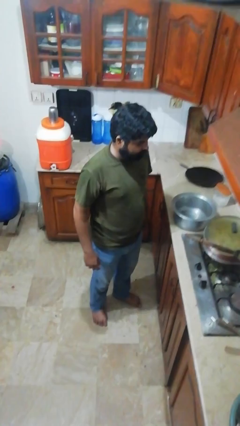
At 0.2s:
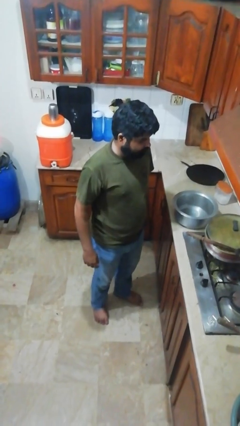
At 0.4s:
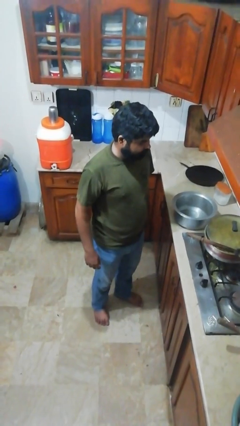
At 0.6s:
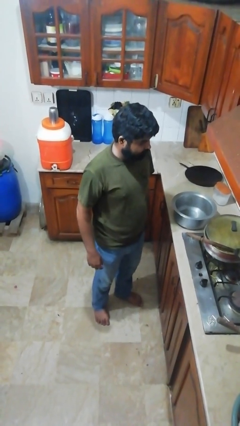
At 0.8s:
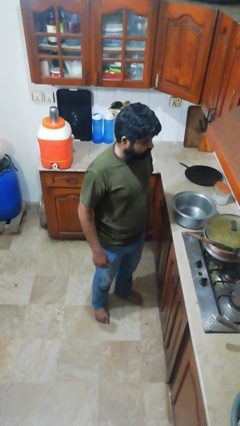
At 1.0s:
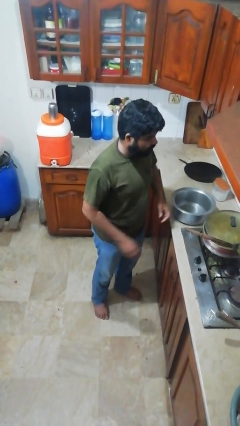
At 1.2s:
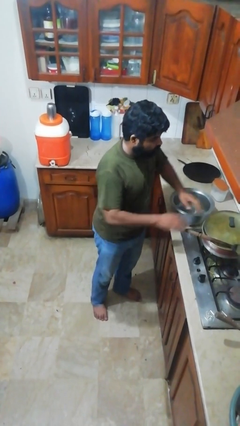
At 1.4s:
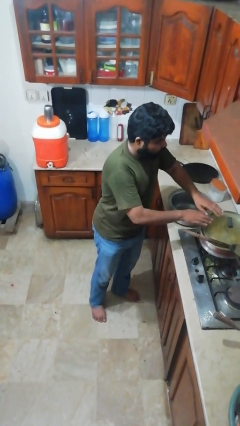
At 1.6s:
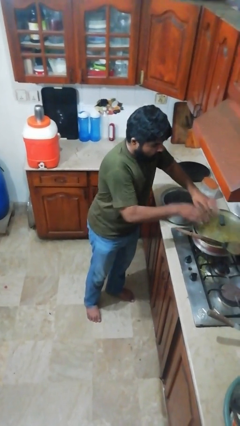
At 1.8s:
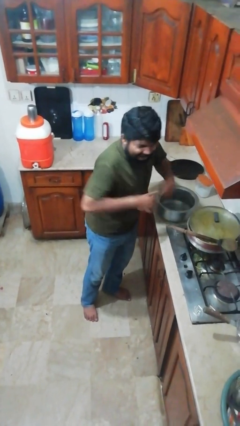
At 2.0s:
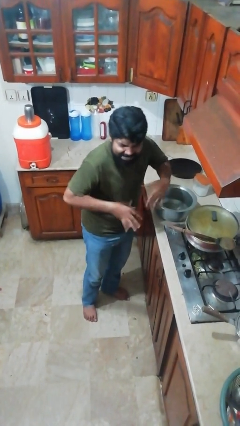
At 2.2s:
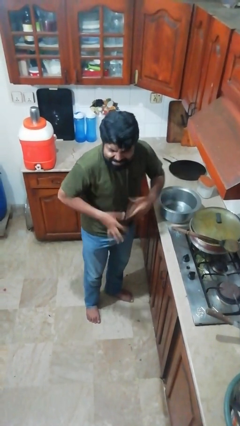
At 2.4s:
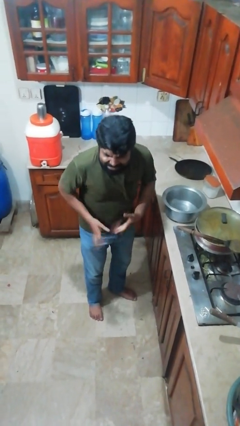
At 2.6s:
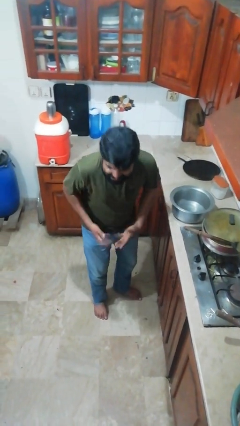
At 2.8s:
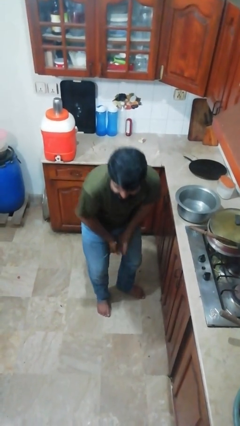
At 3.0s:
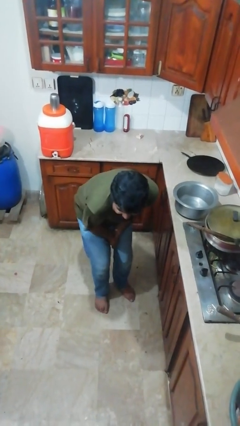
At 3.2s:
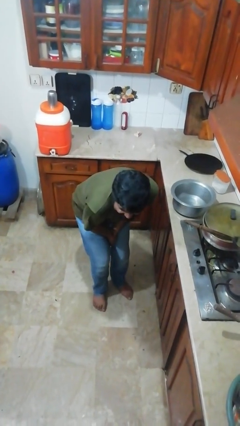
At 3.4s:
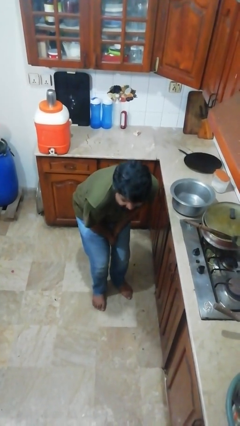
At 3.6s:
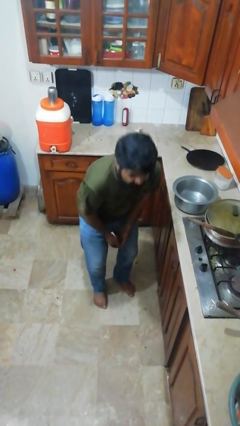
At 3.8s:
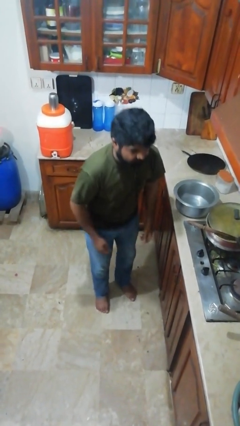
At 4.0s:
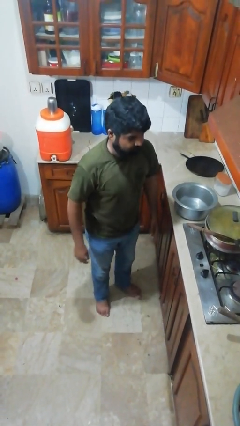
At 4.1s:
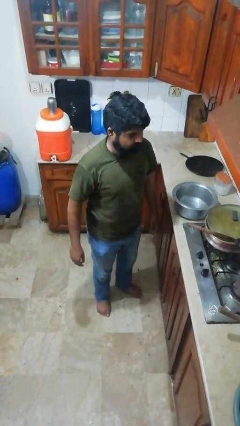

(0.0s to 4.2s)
person burns hand

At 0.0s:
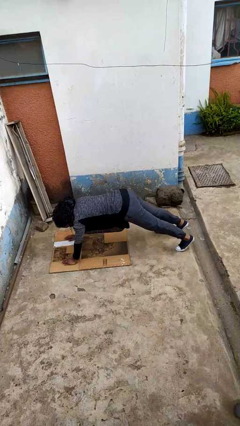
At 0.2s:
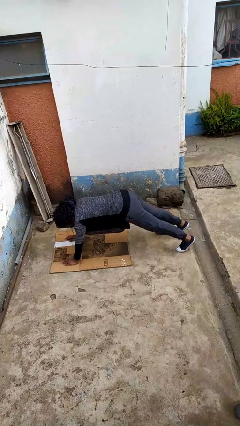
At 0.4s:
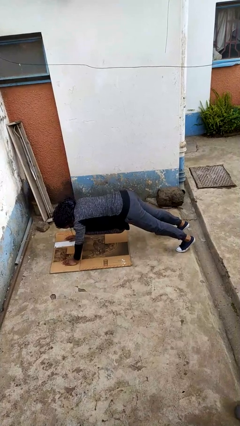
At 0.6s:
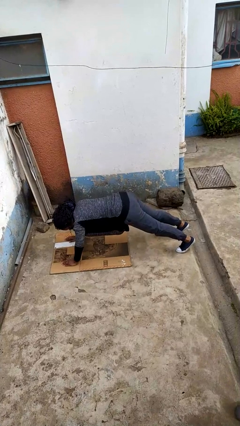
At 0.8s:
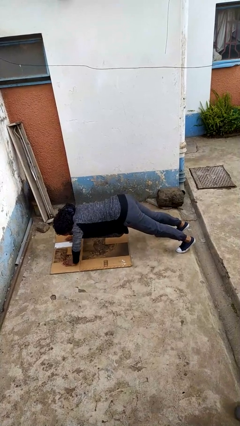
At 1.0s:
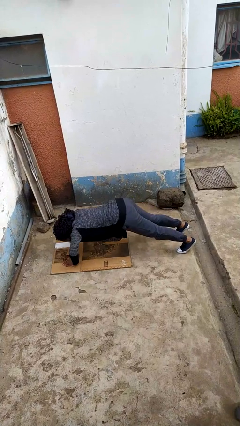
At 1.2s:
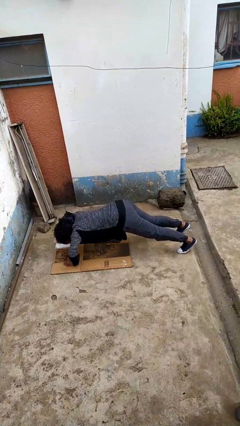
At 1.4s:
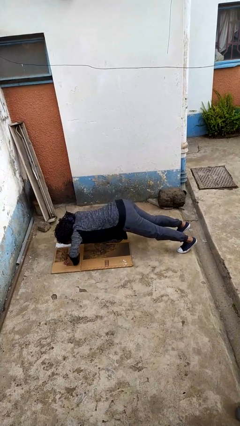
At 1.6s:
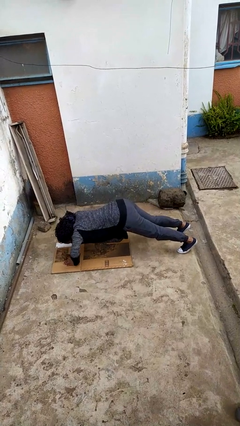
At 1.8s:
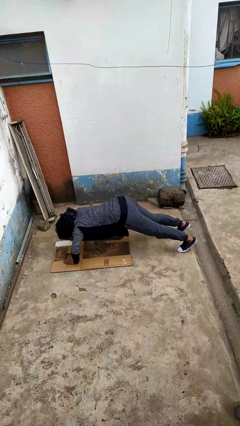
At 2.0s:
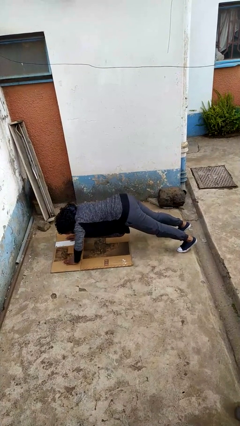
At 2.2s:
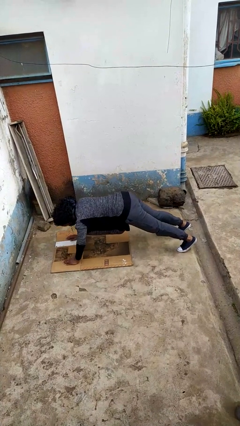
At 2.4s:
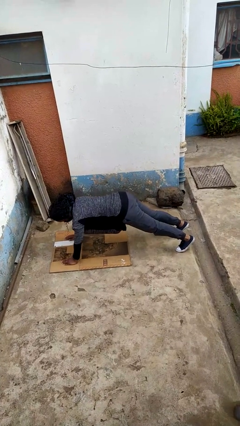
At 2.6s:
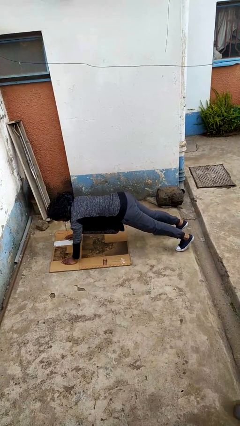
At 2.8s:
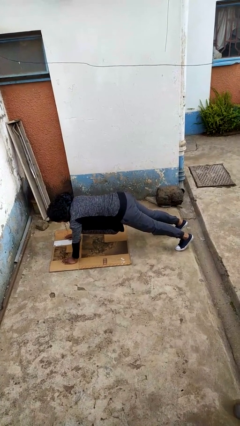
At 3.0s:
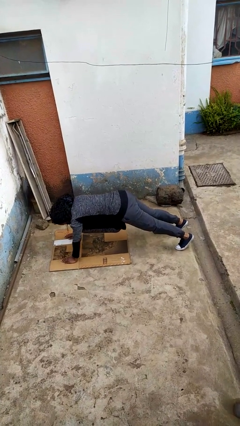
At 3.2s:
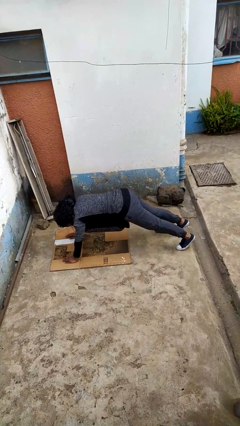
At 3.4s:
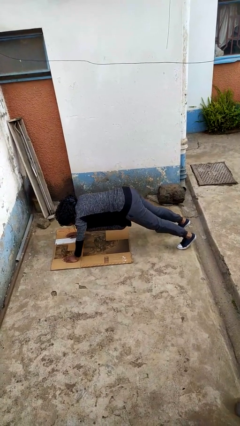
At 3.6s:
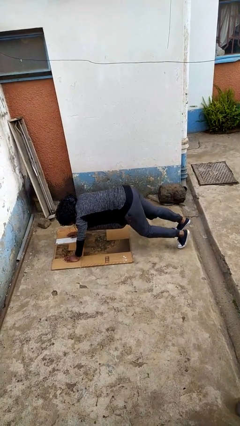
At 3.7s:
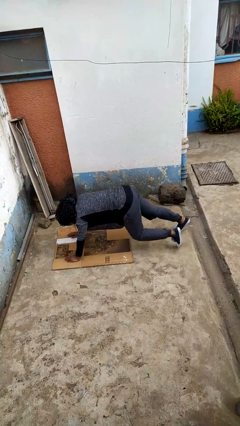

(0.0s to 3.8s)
person exercises with pushup

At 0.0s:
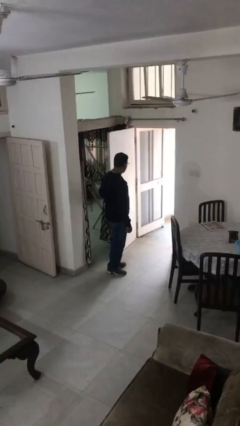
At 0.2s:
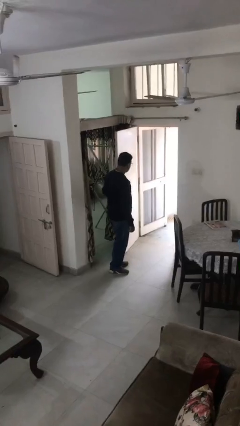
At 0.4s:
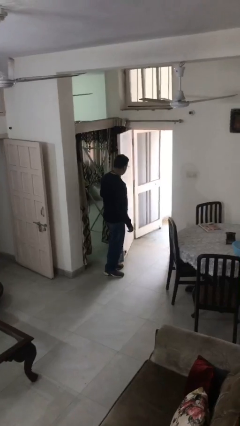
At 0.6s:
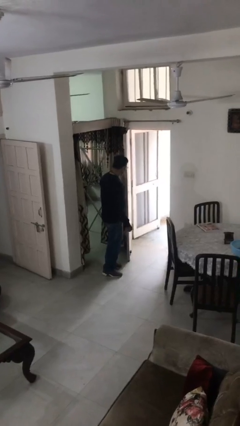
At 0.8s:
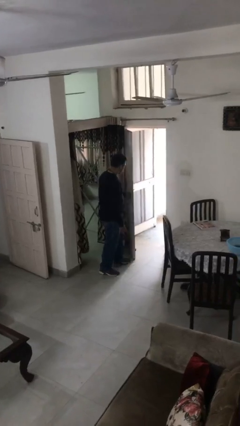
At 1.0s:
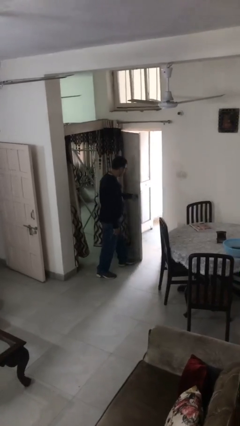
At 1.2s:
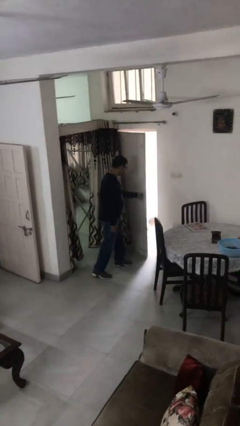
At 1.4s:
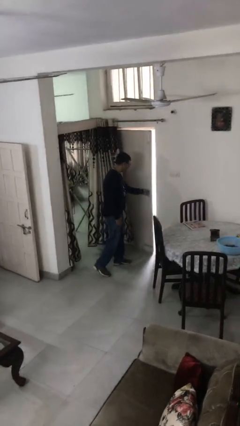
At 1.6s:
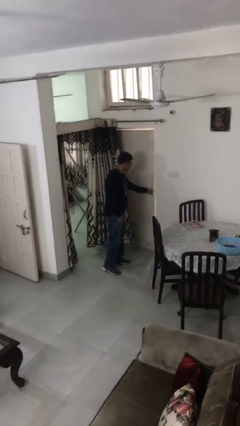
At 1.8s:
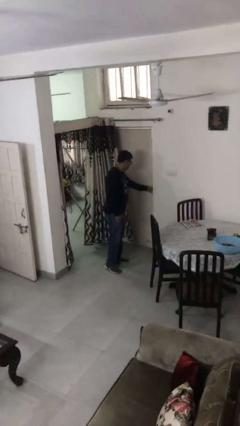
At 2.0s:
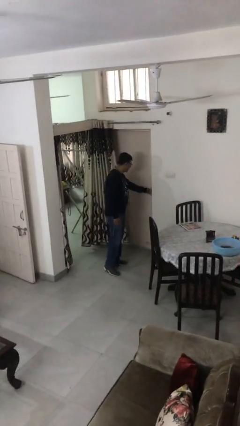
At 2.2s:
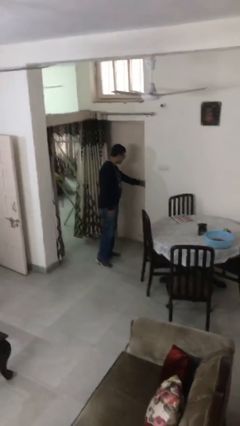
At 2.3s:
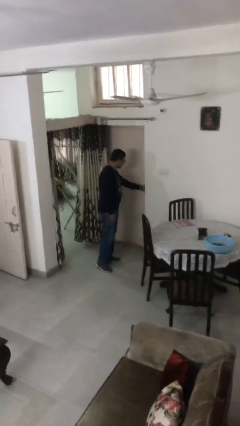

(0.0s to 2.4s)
person closes facility door

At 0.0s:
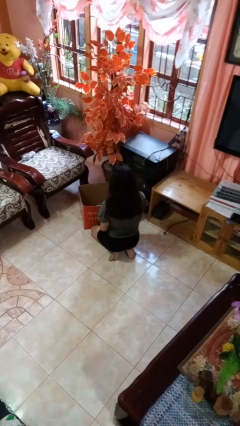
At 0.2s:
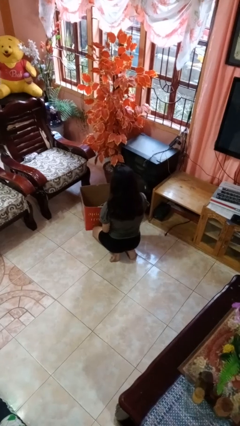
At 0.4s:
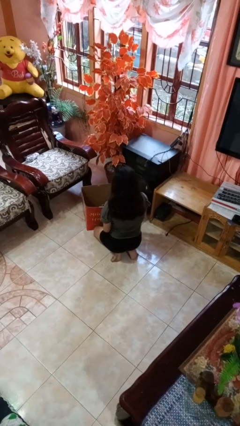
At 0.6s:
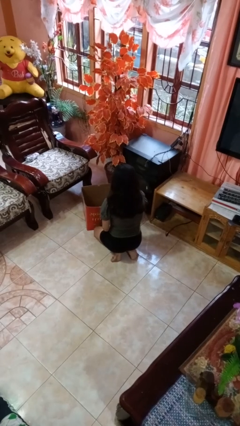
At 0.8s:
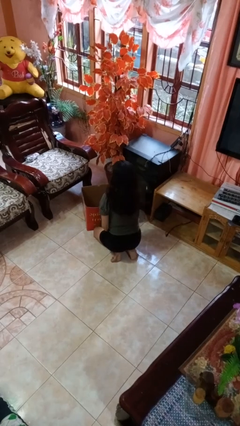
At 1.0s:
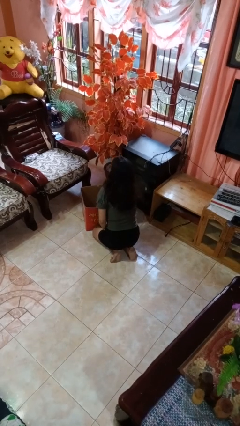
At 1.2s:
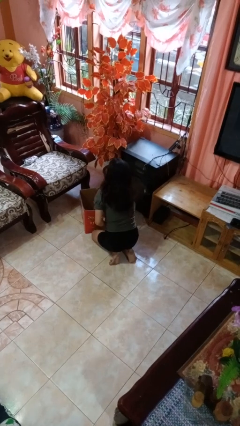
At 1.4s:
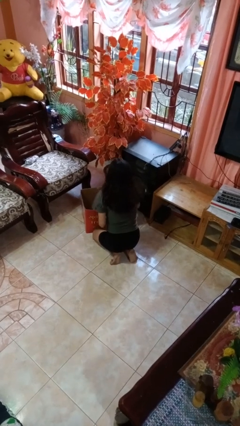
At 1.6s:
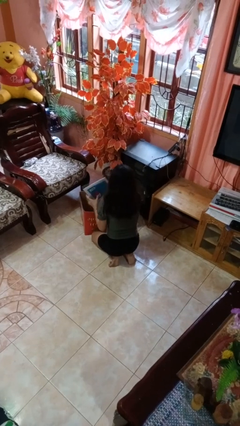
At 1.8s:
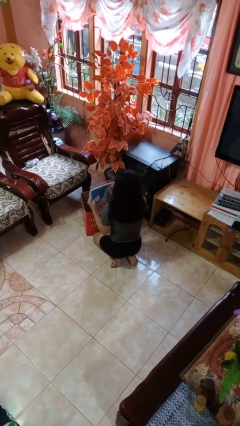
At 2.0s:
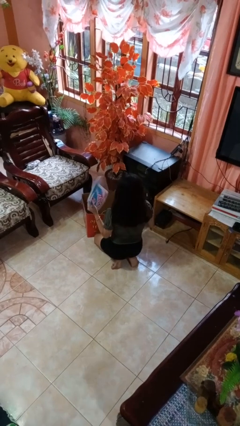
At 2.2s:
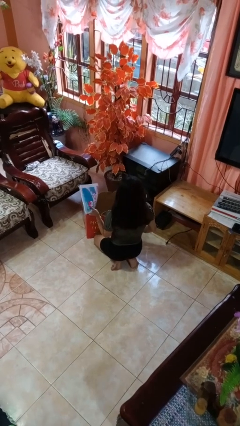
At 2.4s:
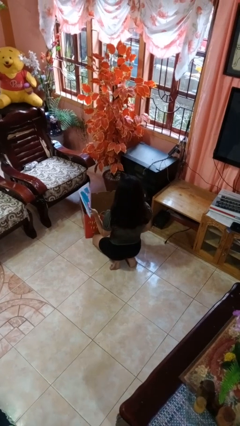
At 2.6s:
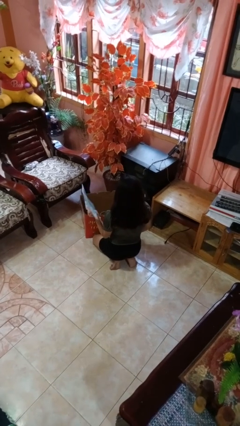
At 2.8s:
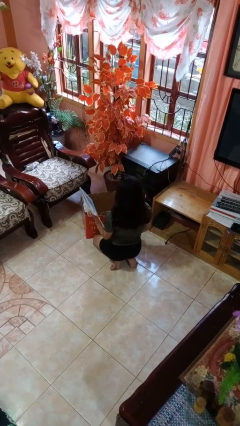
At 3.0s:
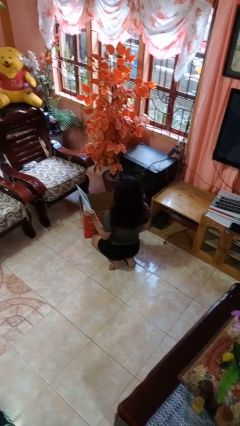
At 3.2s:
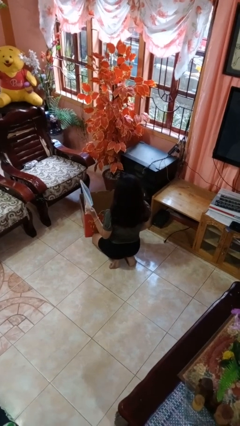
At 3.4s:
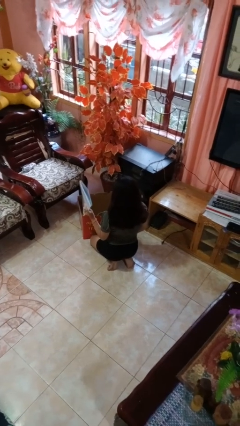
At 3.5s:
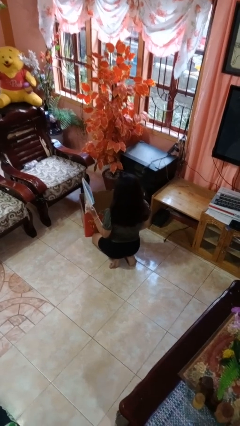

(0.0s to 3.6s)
person takes object from box

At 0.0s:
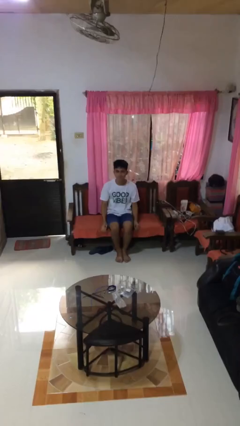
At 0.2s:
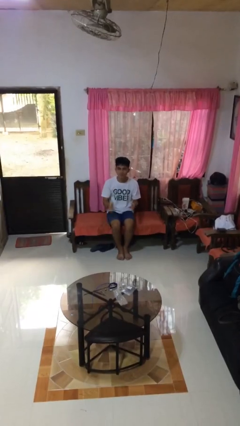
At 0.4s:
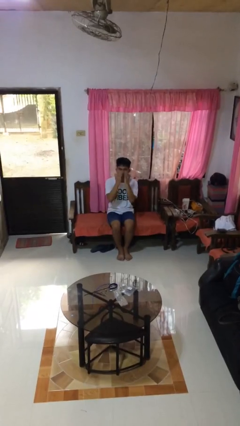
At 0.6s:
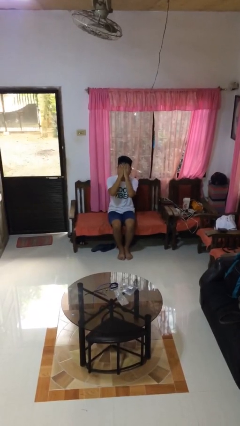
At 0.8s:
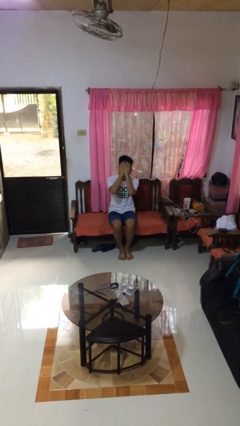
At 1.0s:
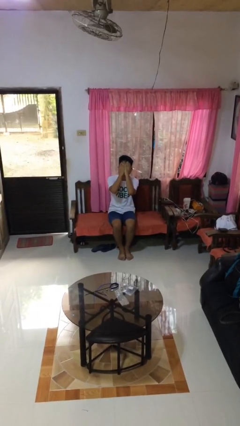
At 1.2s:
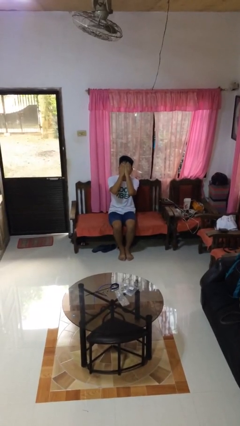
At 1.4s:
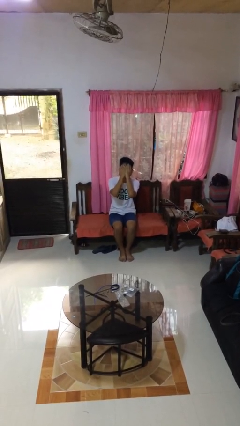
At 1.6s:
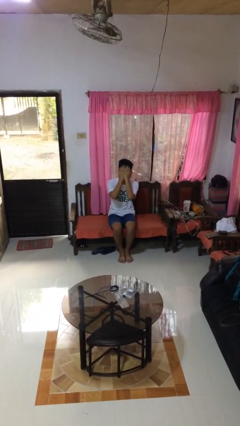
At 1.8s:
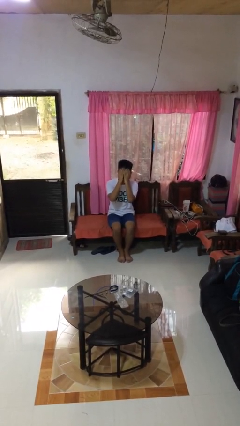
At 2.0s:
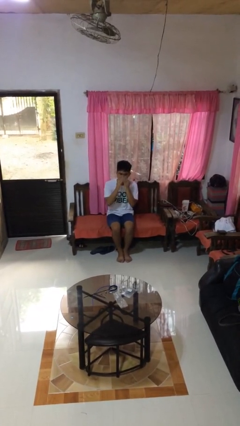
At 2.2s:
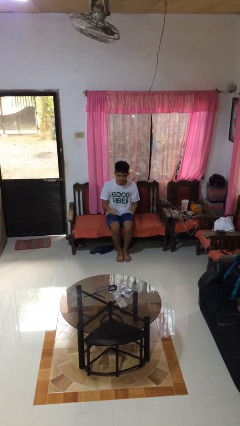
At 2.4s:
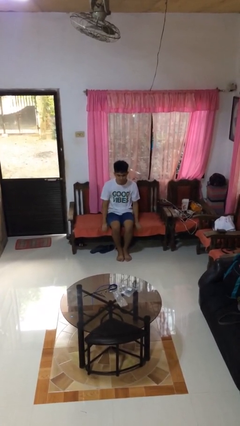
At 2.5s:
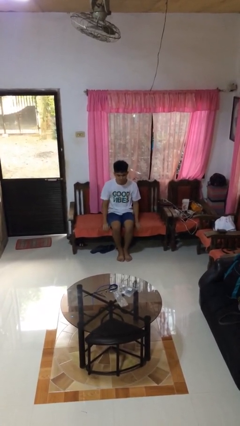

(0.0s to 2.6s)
person covers face with hands

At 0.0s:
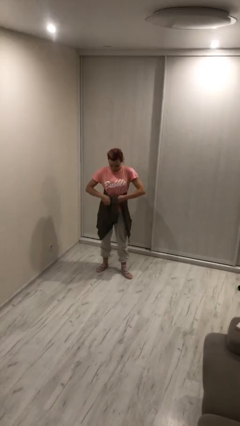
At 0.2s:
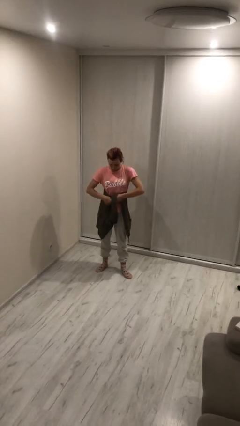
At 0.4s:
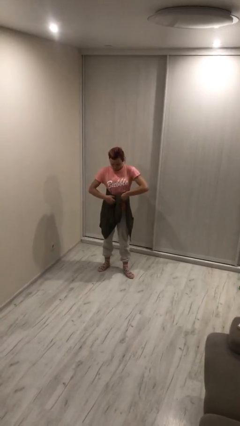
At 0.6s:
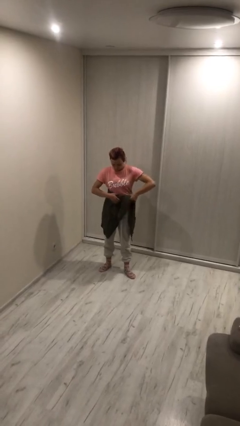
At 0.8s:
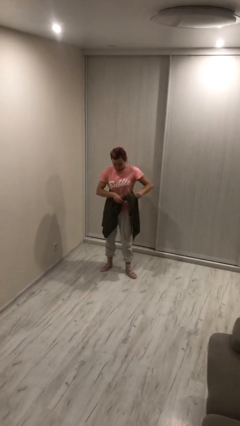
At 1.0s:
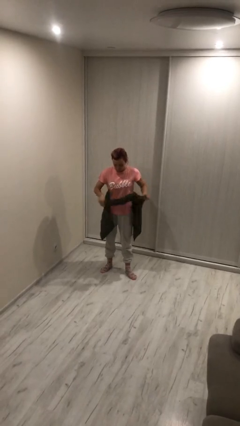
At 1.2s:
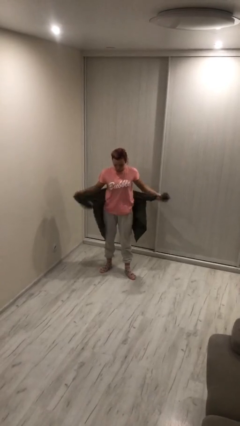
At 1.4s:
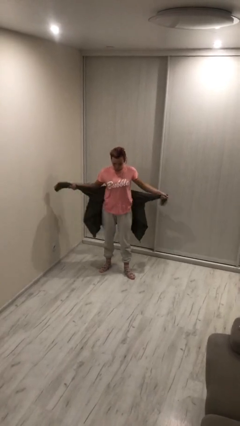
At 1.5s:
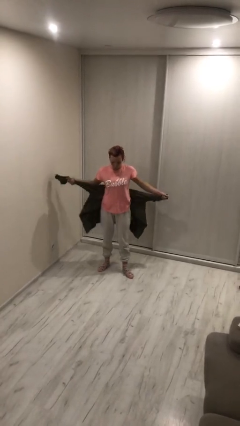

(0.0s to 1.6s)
person unties jacket around waist
